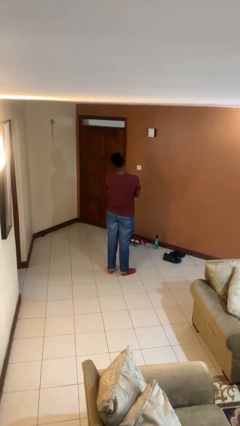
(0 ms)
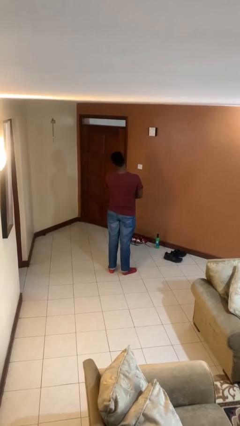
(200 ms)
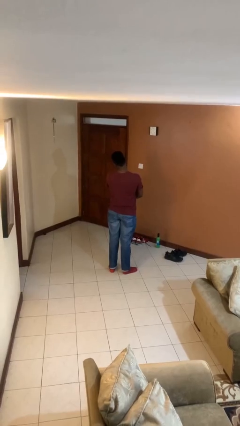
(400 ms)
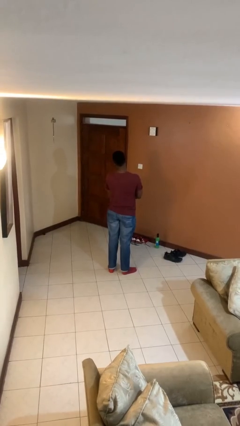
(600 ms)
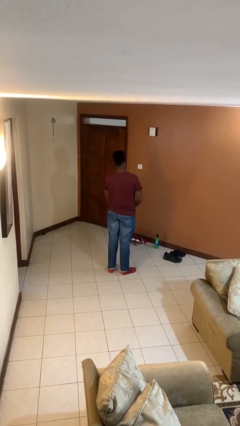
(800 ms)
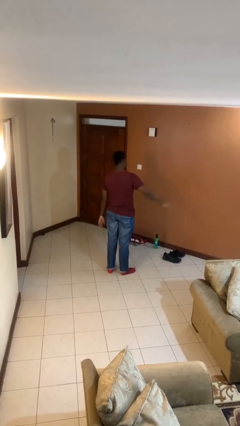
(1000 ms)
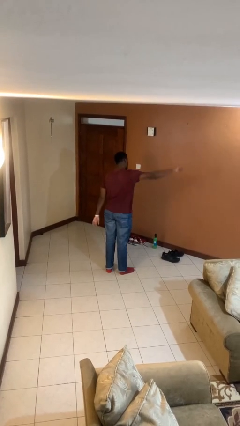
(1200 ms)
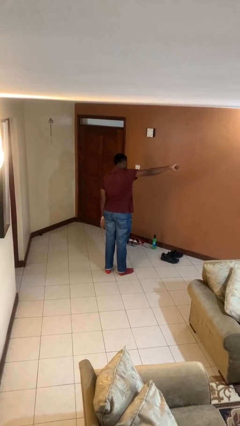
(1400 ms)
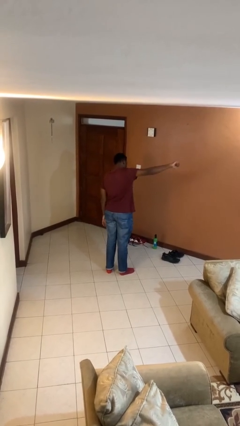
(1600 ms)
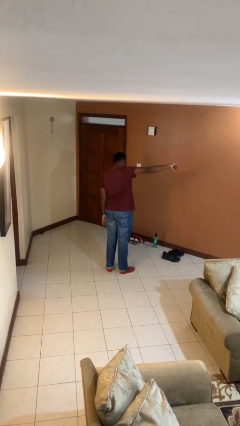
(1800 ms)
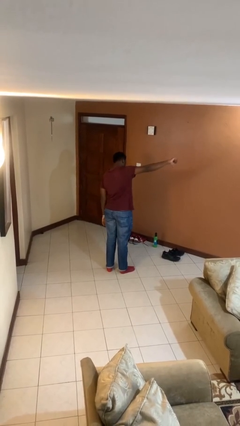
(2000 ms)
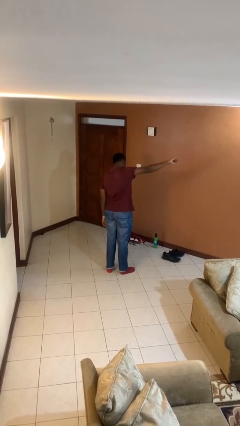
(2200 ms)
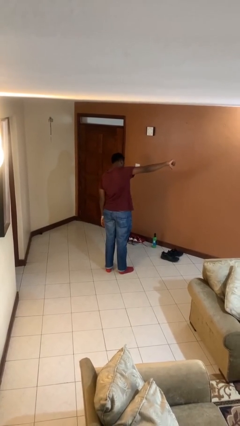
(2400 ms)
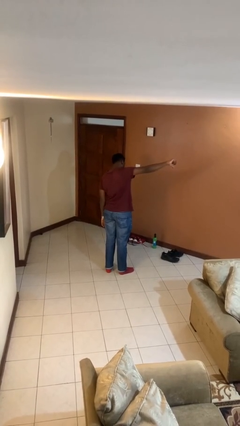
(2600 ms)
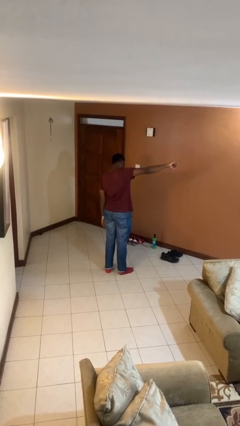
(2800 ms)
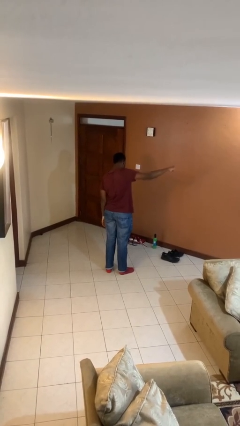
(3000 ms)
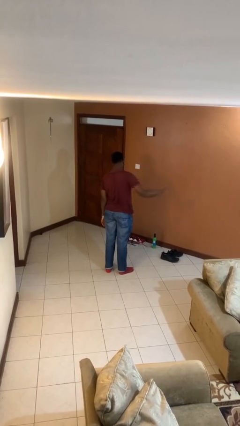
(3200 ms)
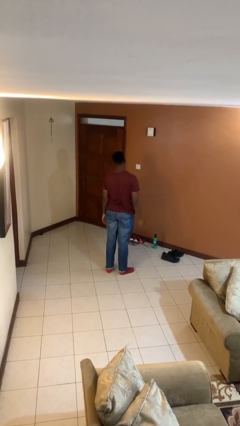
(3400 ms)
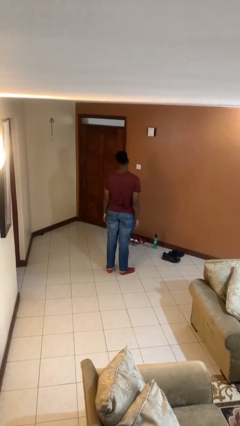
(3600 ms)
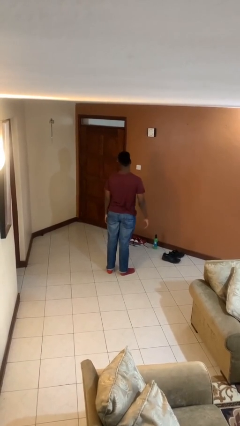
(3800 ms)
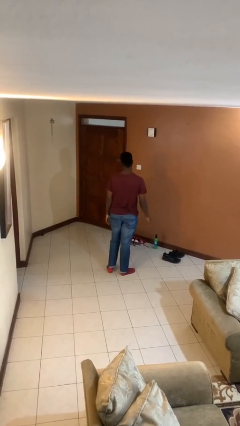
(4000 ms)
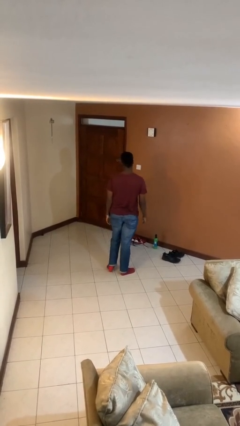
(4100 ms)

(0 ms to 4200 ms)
person gestures thumbs down

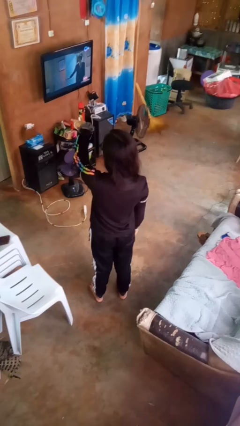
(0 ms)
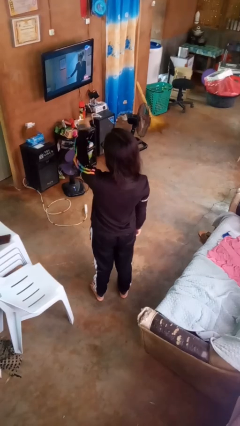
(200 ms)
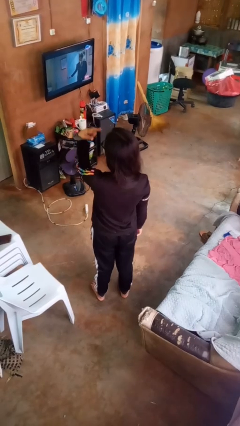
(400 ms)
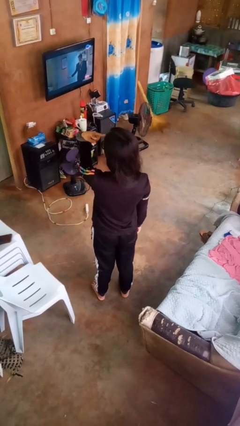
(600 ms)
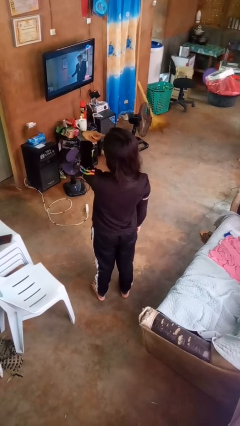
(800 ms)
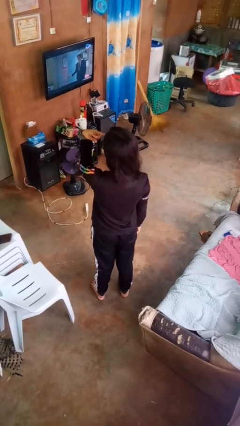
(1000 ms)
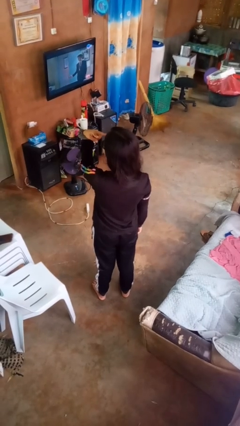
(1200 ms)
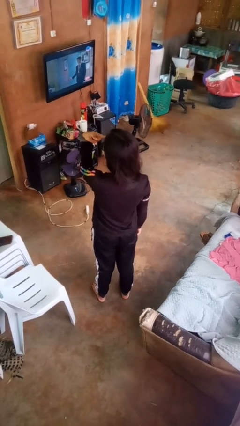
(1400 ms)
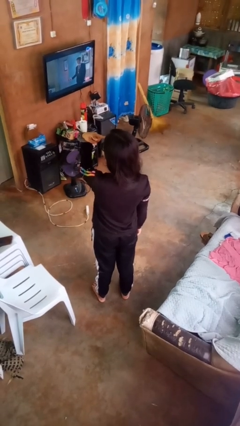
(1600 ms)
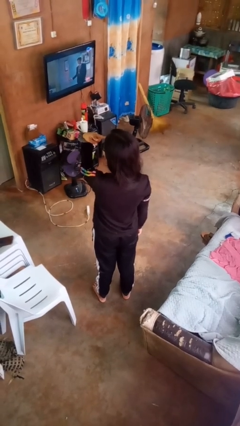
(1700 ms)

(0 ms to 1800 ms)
person gestures watch closely

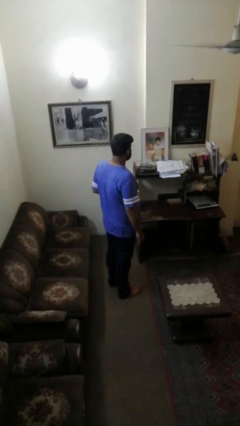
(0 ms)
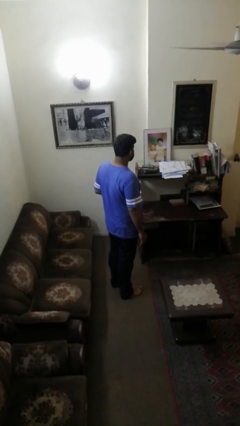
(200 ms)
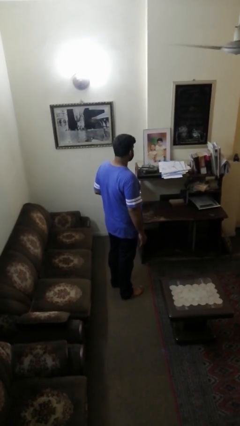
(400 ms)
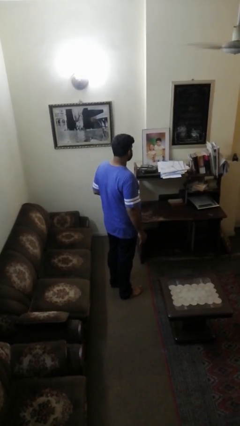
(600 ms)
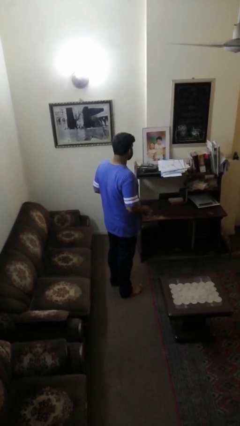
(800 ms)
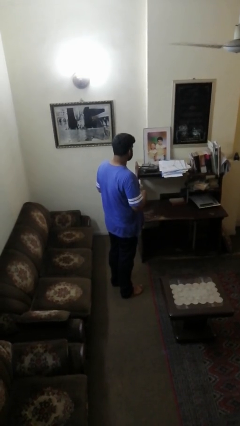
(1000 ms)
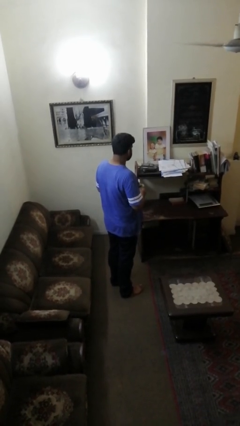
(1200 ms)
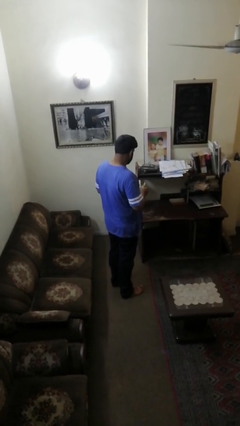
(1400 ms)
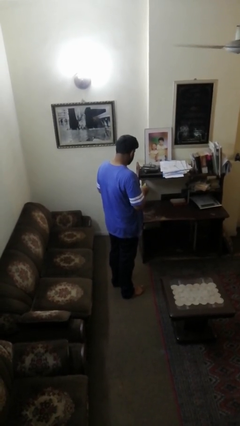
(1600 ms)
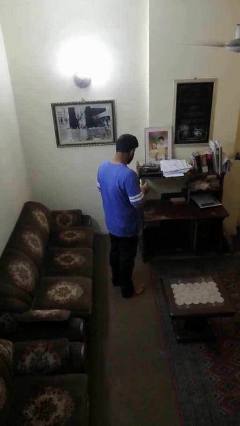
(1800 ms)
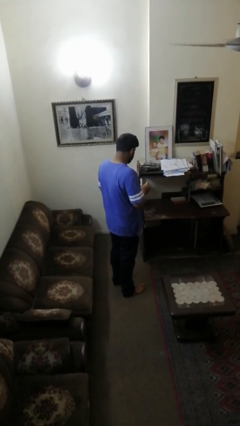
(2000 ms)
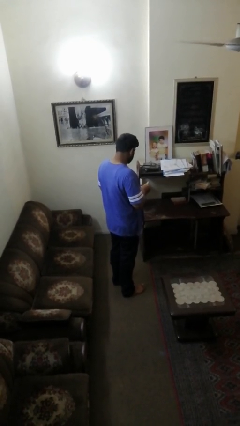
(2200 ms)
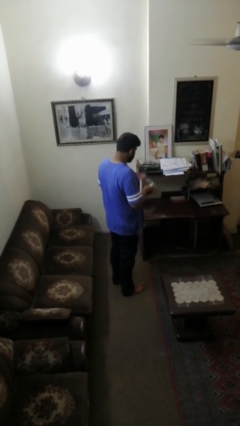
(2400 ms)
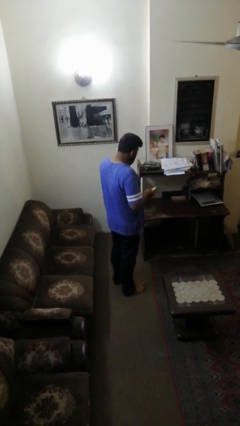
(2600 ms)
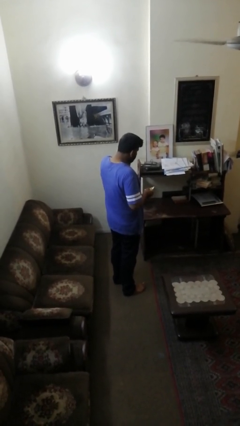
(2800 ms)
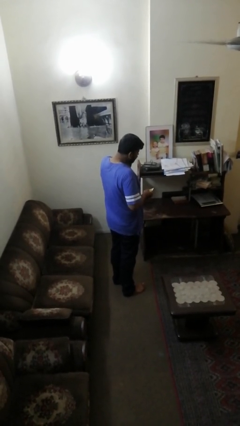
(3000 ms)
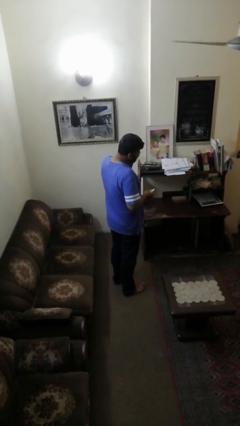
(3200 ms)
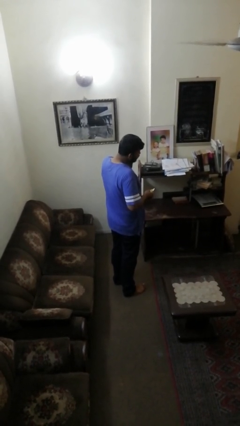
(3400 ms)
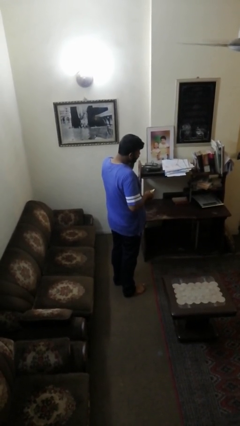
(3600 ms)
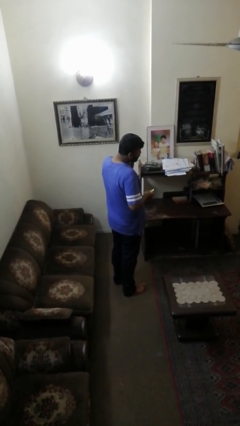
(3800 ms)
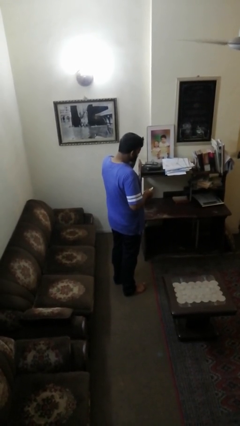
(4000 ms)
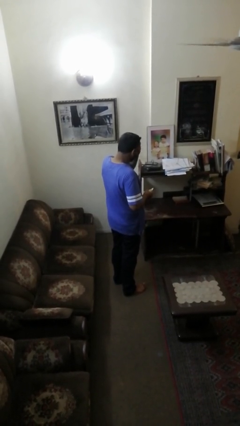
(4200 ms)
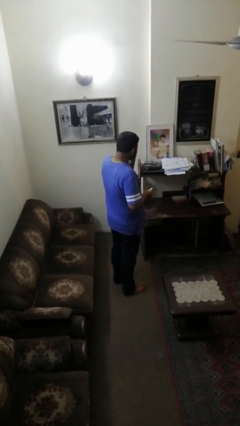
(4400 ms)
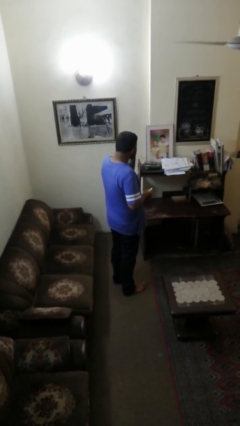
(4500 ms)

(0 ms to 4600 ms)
person applies sunscreen

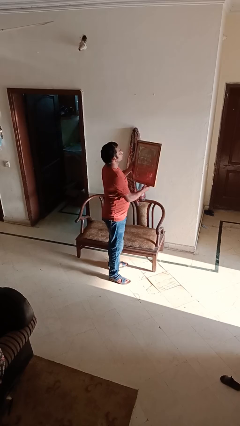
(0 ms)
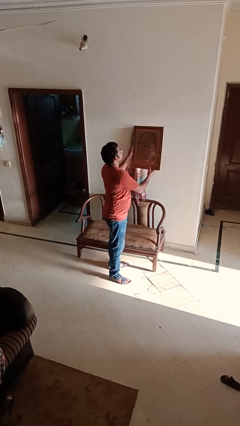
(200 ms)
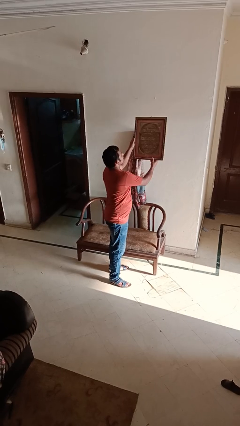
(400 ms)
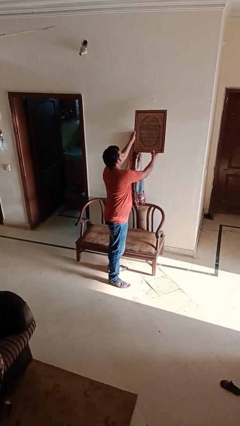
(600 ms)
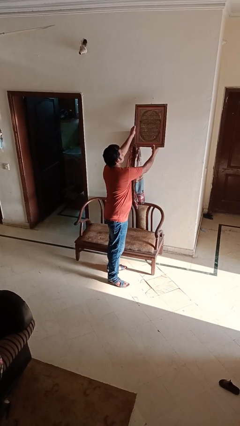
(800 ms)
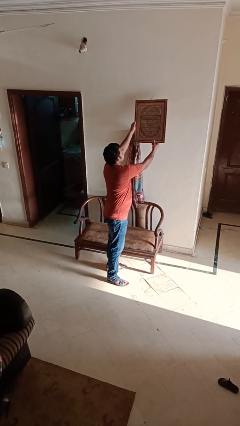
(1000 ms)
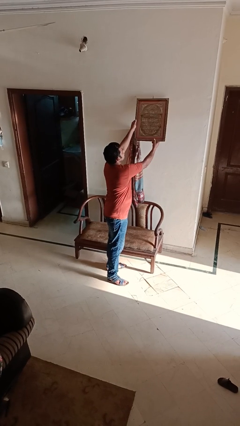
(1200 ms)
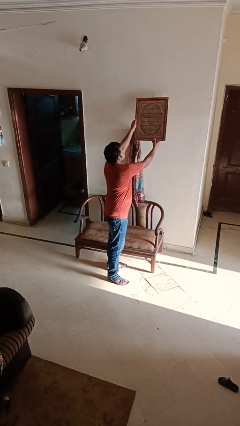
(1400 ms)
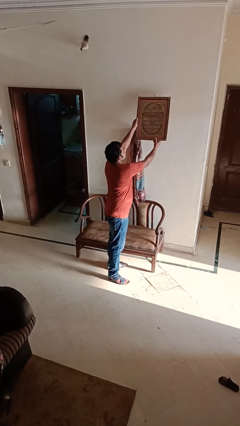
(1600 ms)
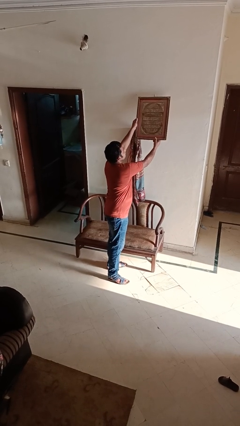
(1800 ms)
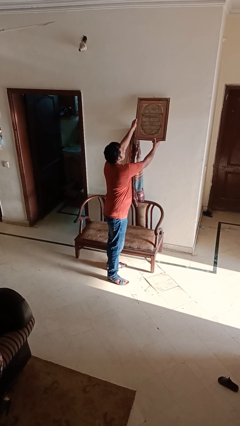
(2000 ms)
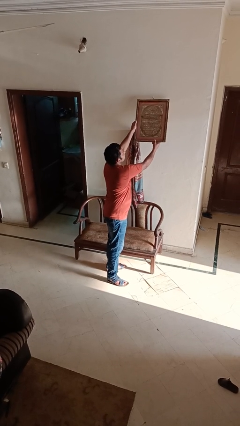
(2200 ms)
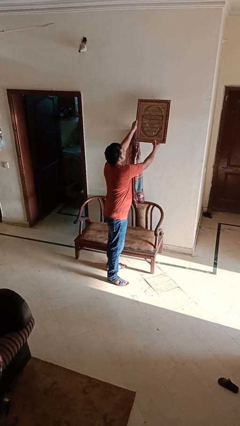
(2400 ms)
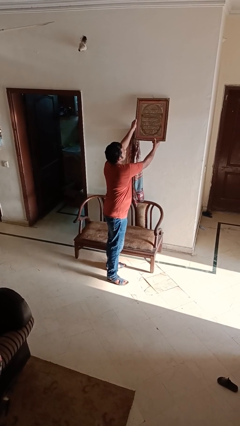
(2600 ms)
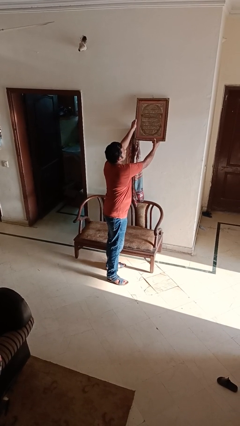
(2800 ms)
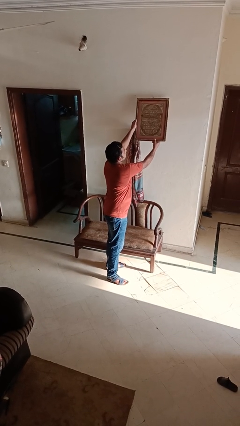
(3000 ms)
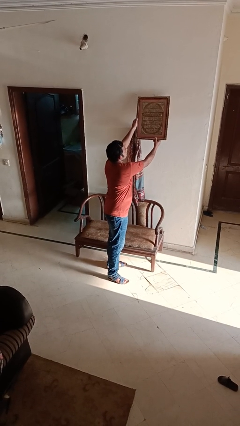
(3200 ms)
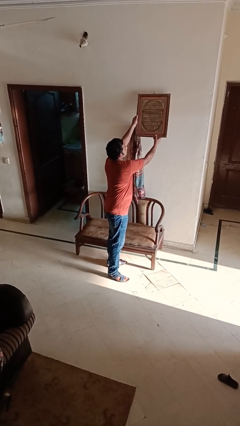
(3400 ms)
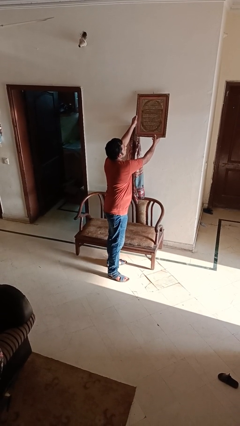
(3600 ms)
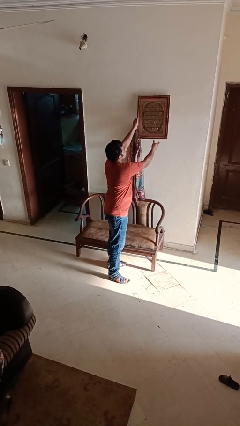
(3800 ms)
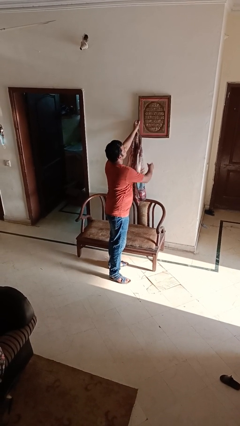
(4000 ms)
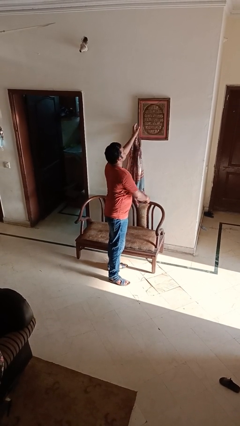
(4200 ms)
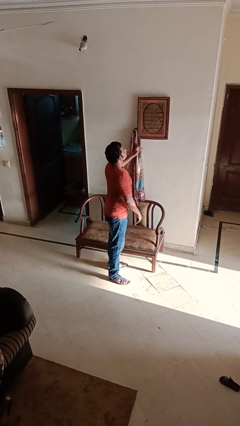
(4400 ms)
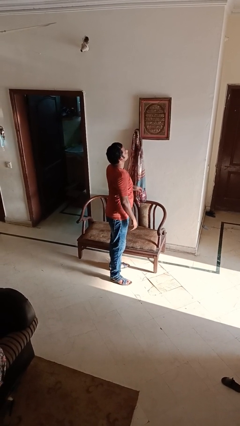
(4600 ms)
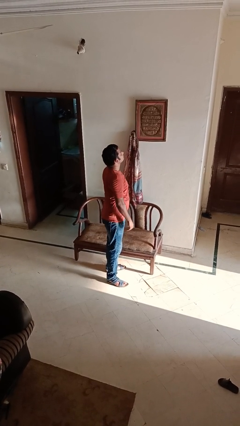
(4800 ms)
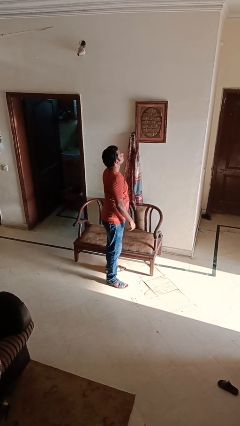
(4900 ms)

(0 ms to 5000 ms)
person puts up picture frame

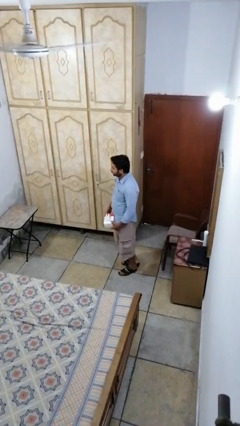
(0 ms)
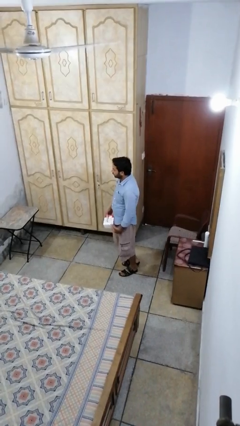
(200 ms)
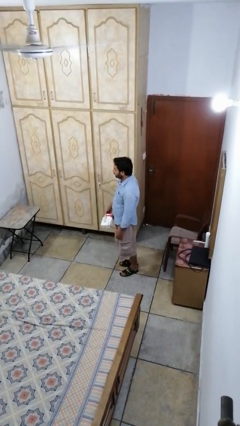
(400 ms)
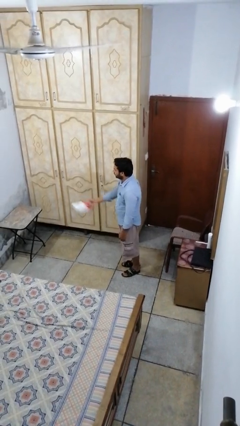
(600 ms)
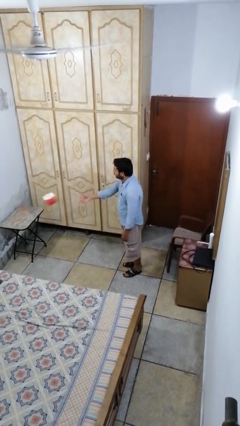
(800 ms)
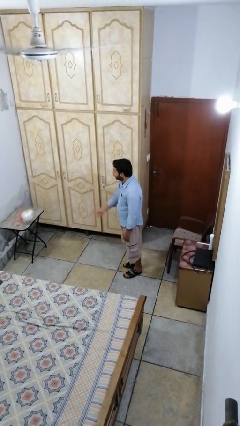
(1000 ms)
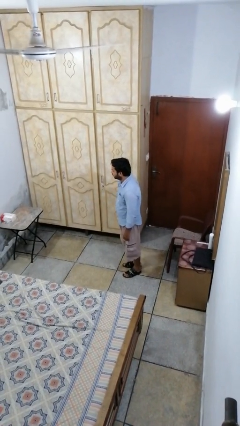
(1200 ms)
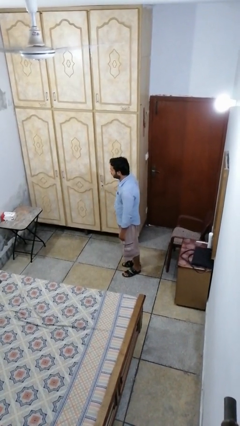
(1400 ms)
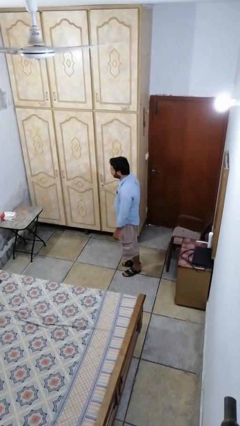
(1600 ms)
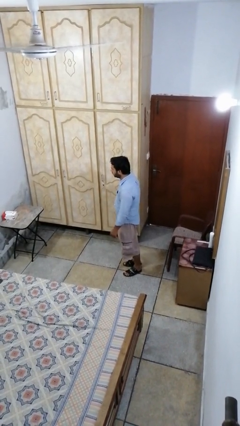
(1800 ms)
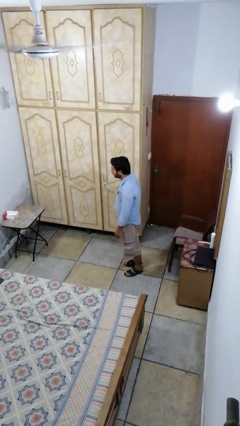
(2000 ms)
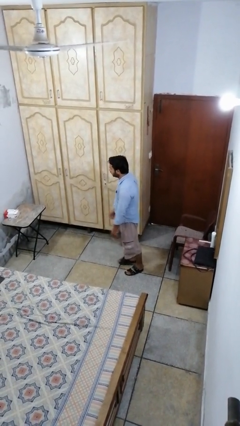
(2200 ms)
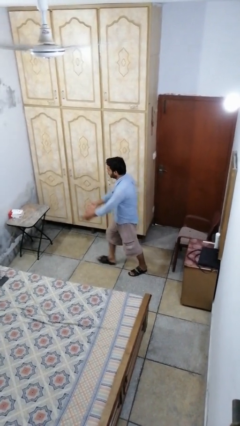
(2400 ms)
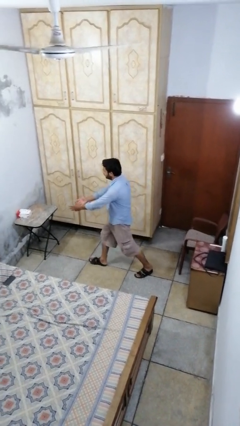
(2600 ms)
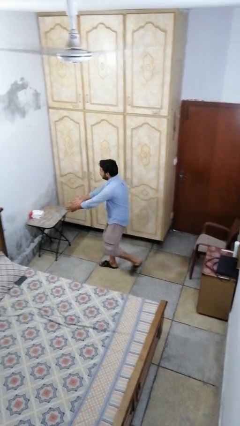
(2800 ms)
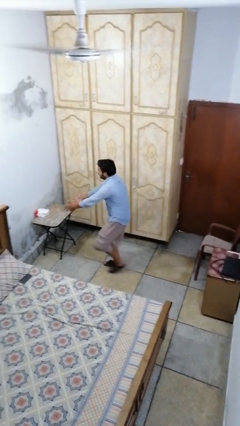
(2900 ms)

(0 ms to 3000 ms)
person throws object on table
